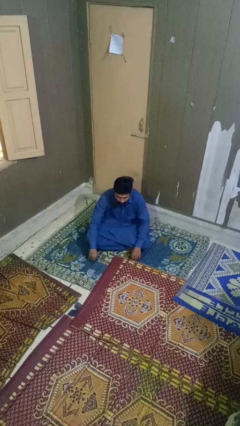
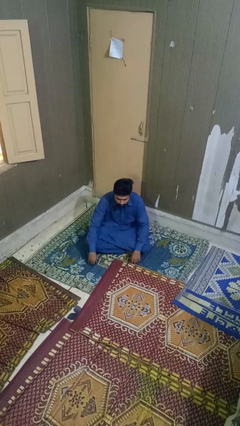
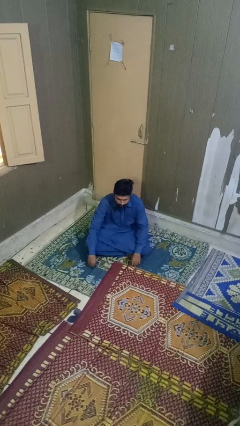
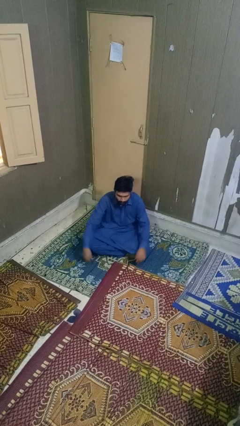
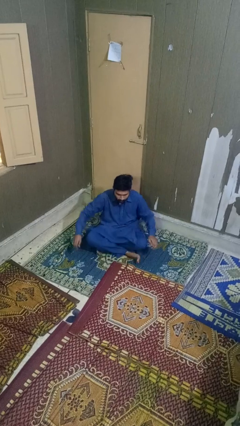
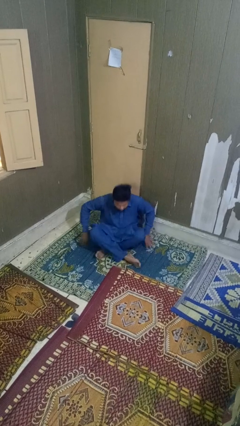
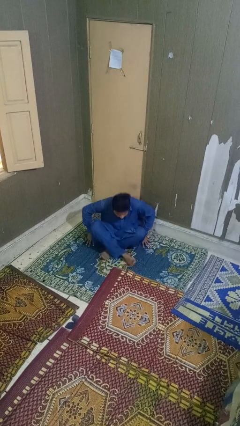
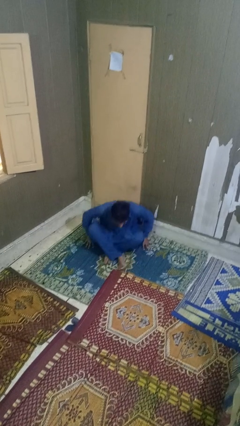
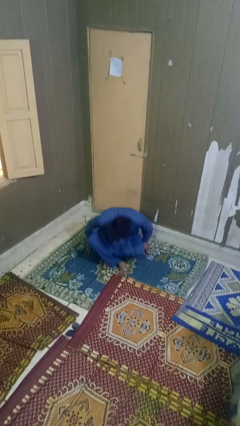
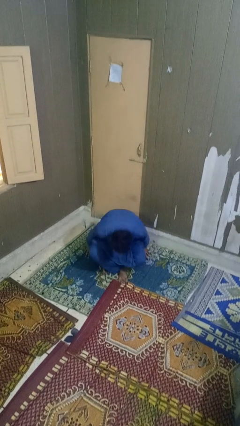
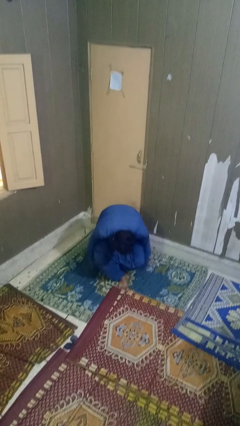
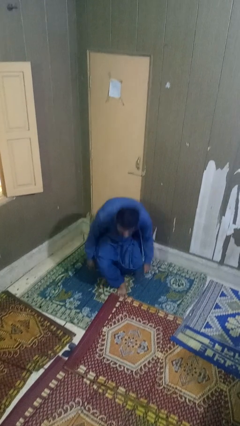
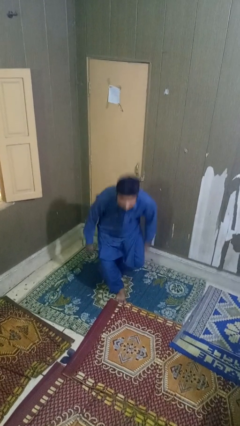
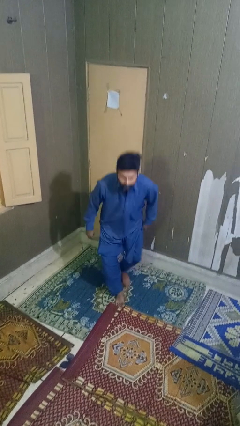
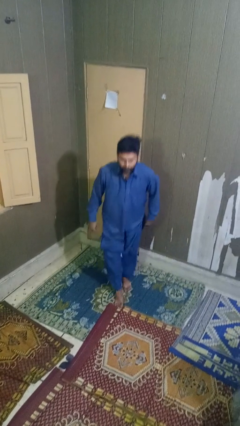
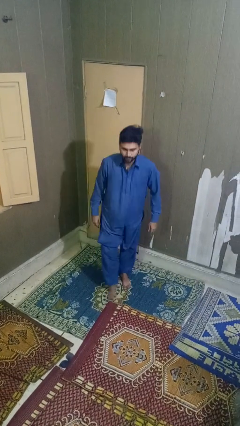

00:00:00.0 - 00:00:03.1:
person stands up from floor

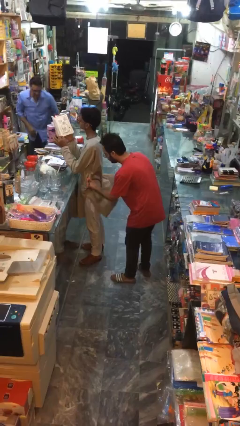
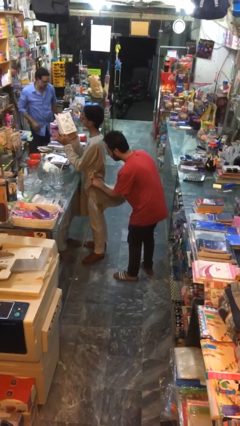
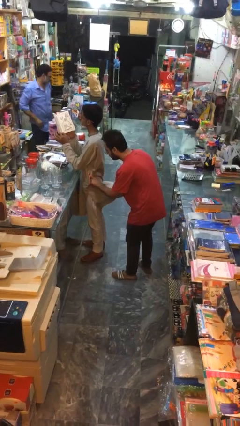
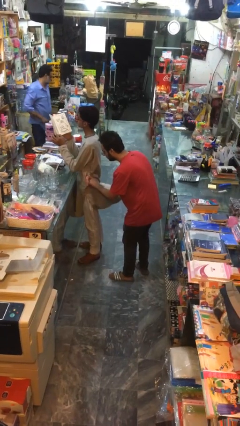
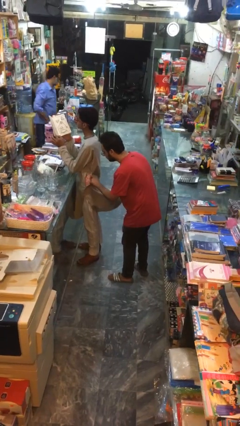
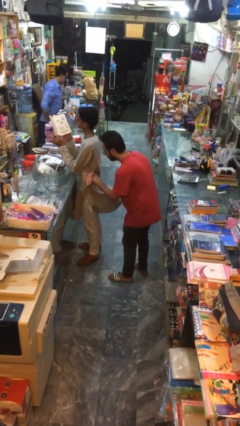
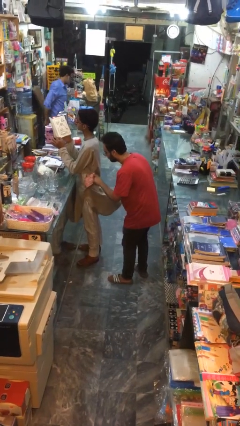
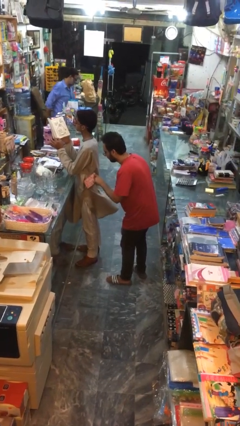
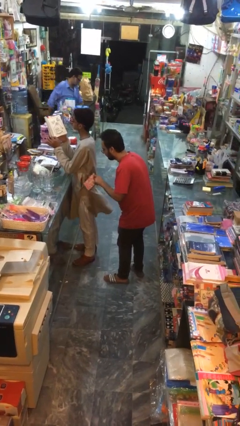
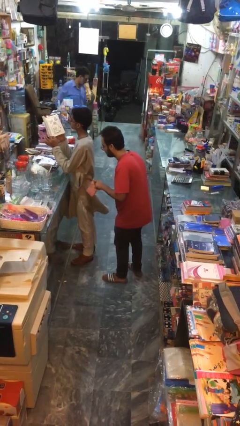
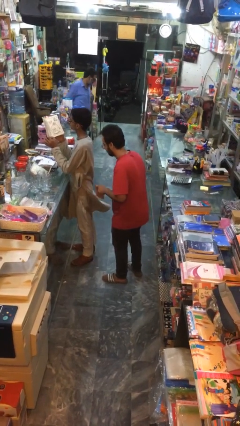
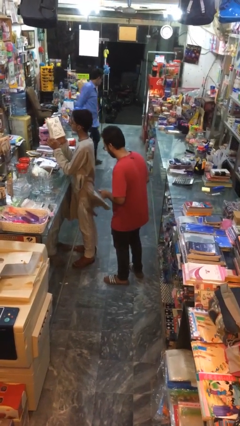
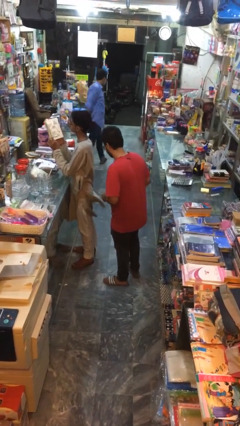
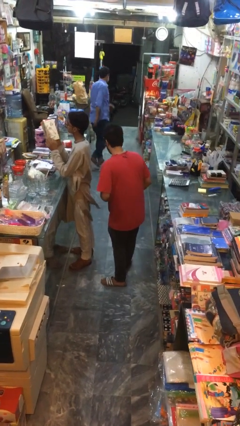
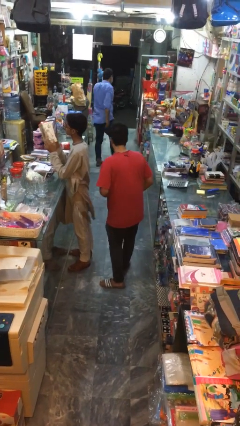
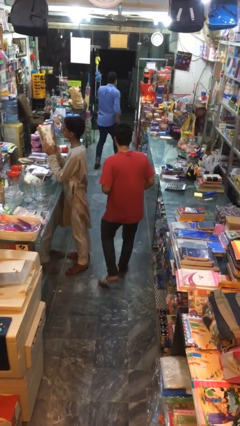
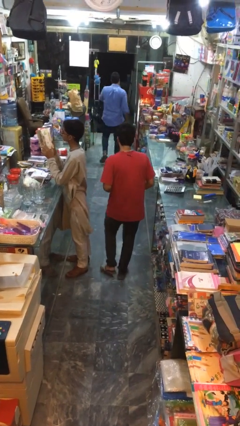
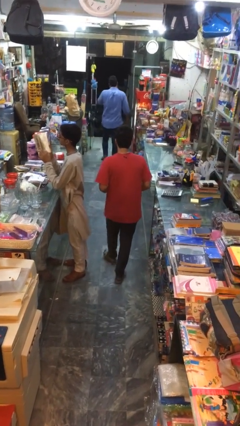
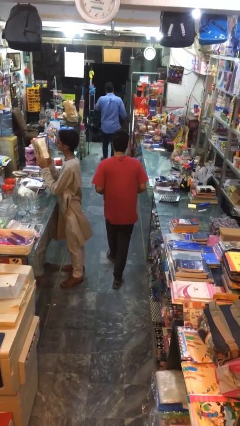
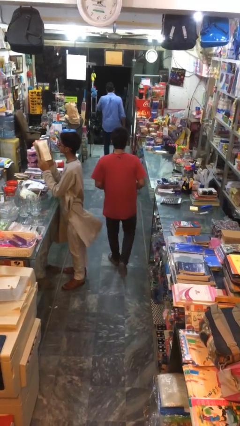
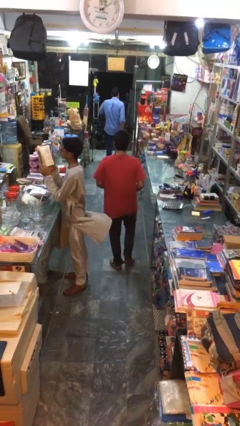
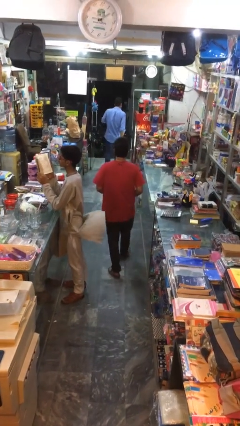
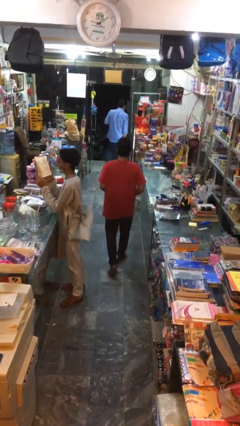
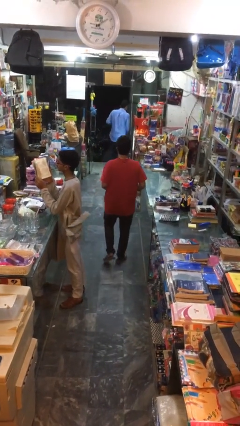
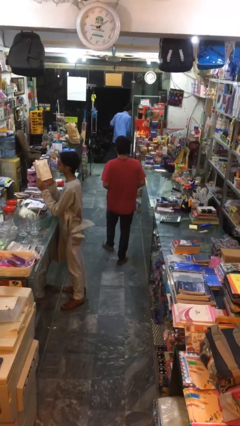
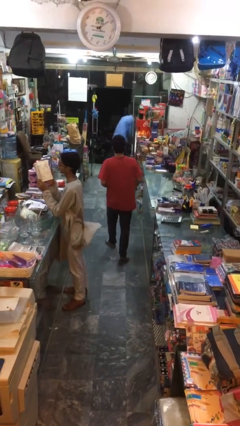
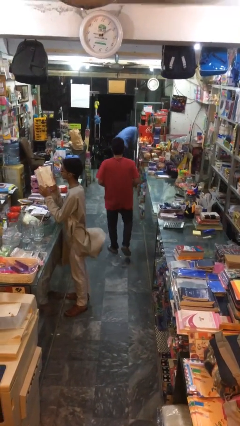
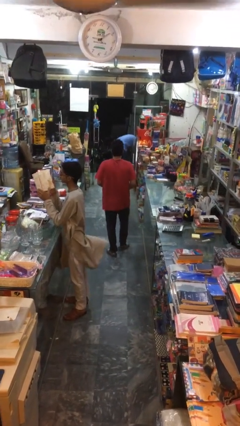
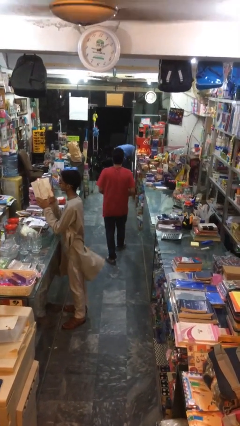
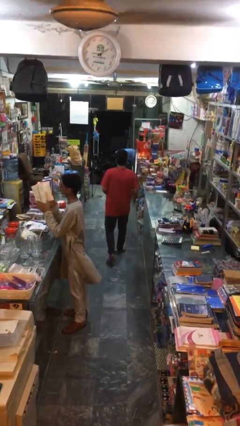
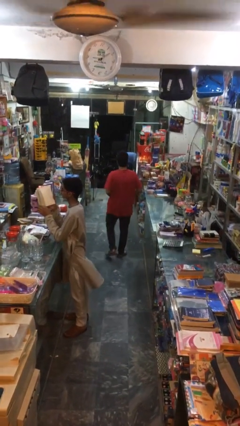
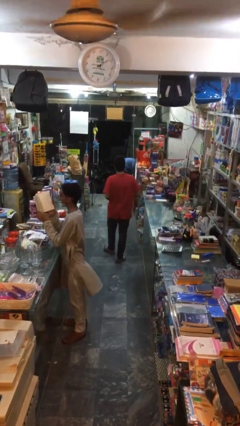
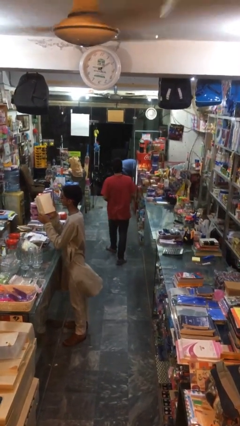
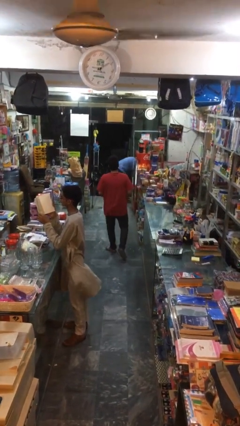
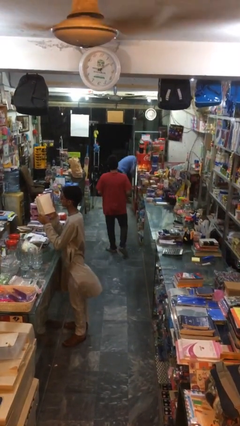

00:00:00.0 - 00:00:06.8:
person steals object from person

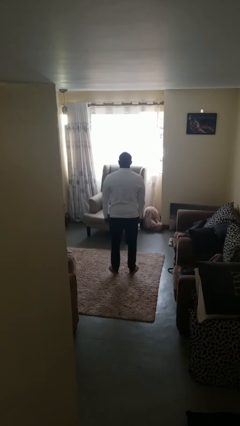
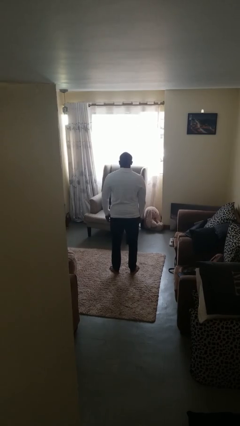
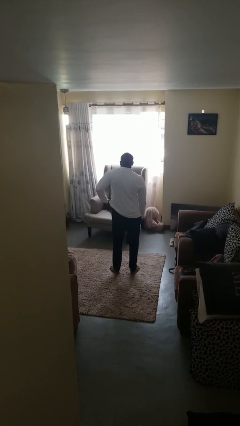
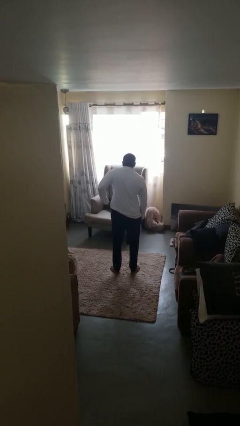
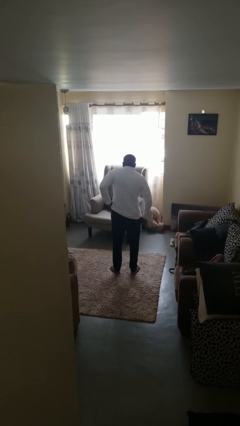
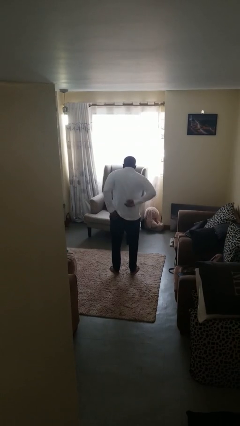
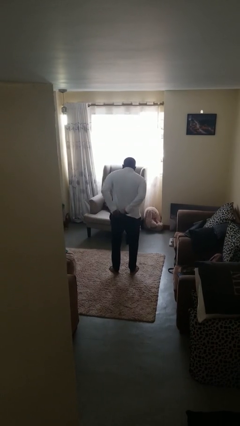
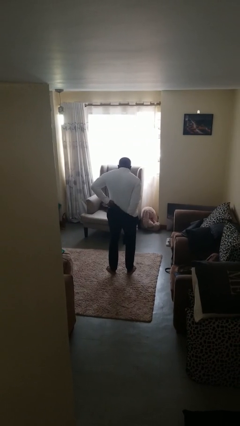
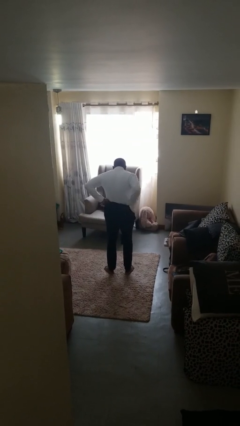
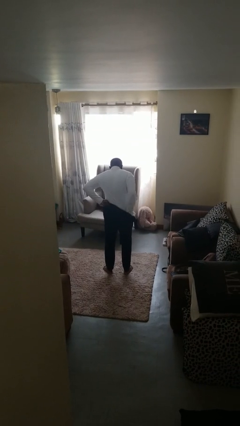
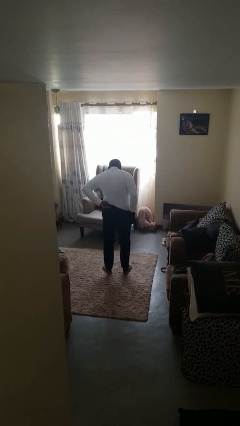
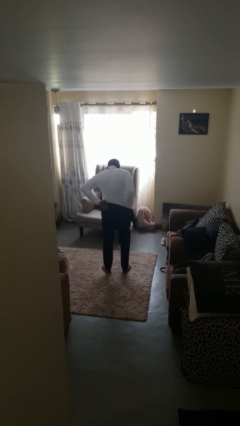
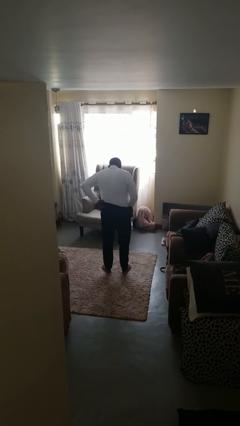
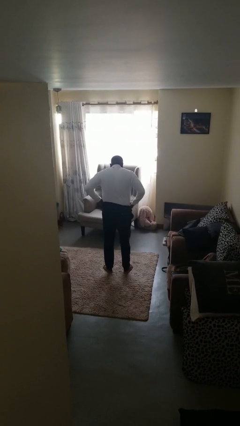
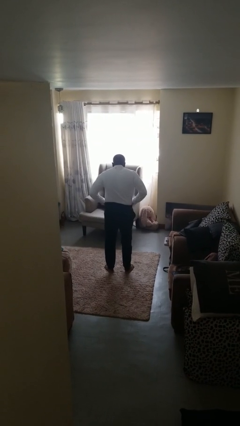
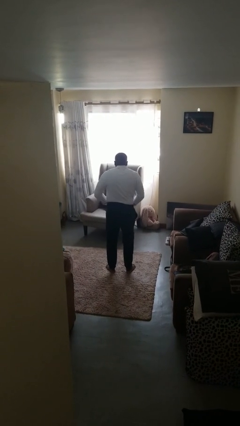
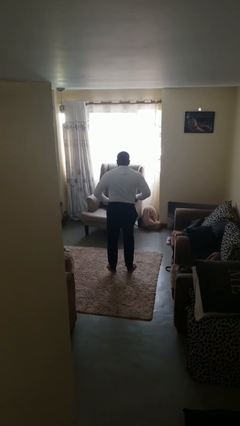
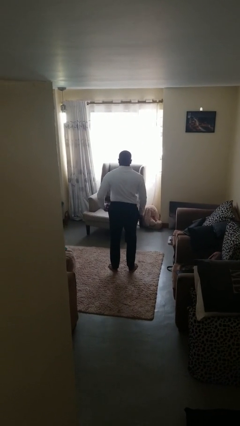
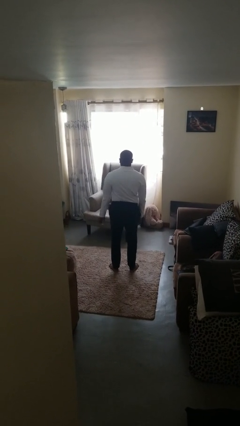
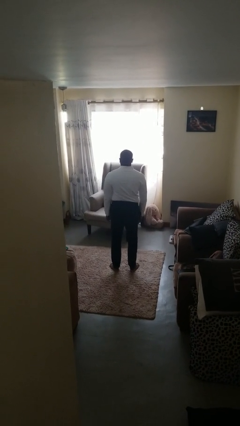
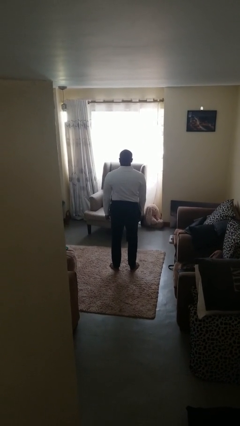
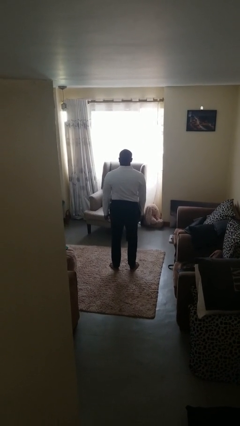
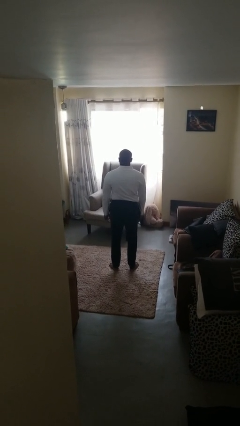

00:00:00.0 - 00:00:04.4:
person tucks in shirt

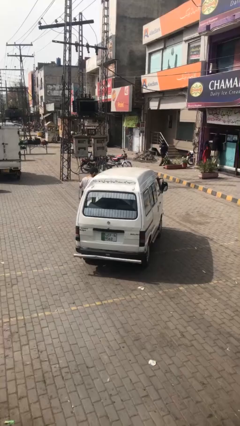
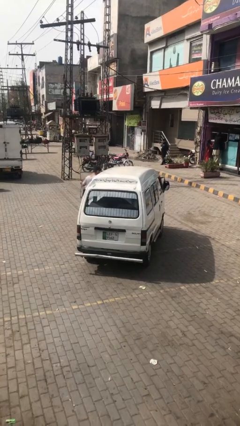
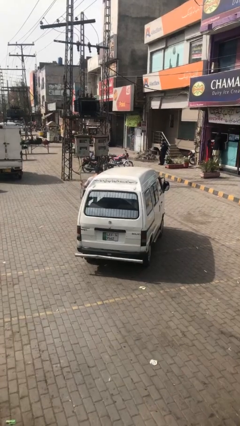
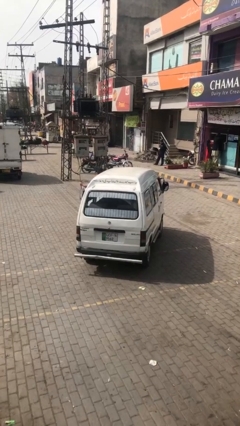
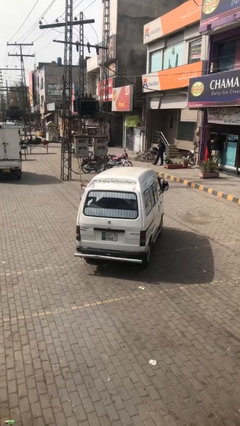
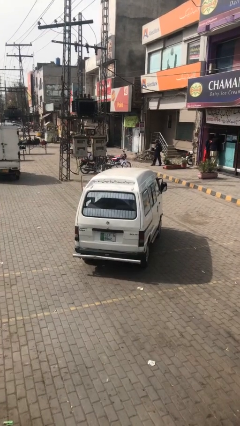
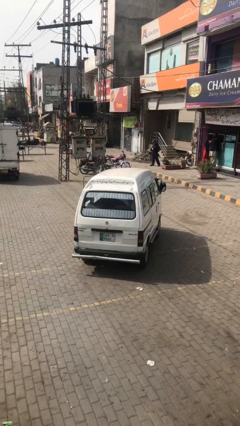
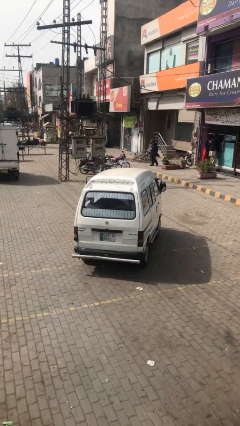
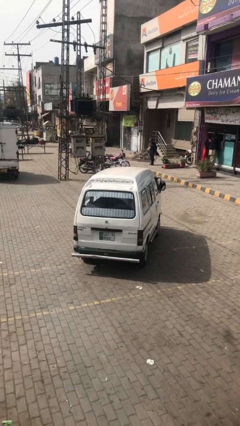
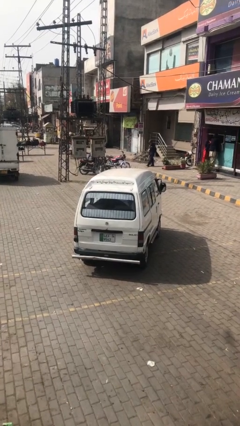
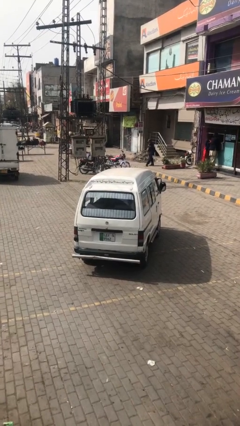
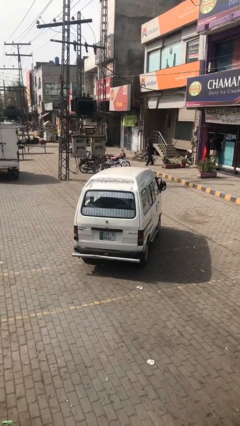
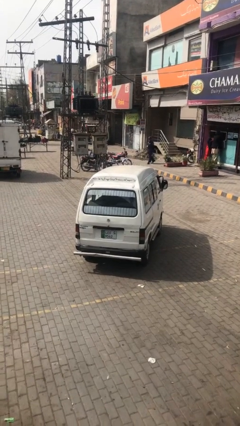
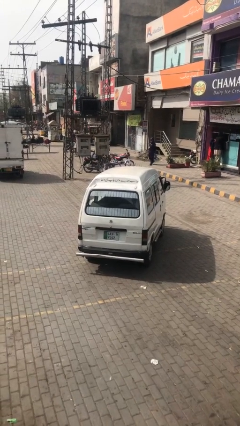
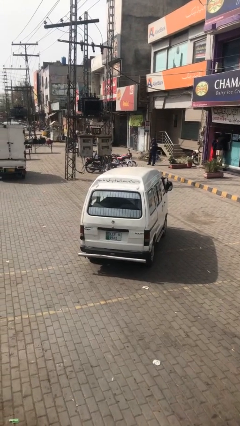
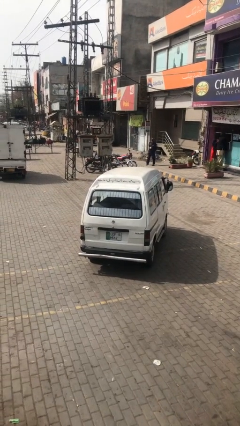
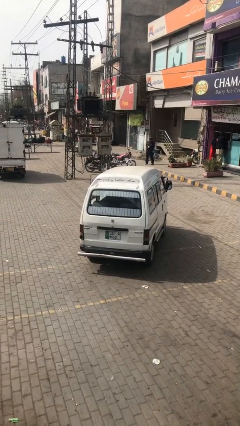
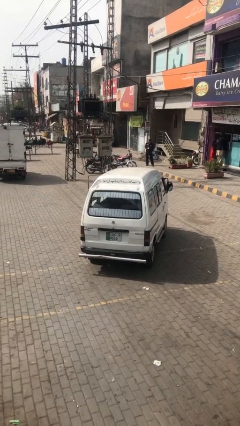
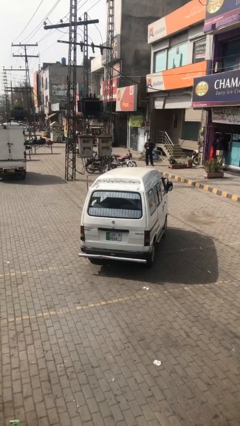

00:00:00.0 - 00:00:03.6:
car picks up person
